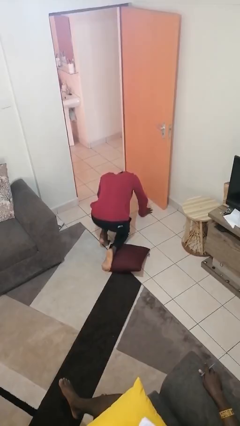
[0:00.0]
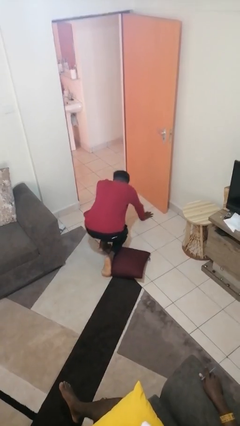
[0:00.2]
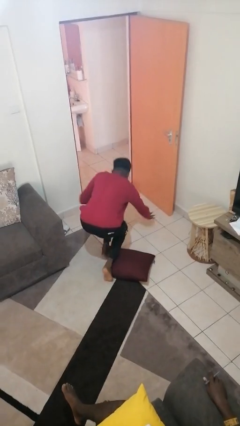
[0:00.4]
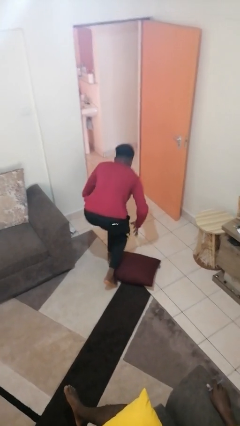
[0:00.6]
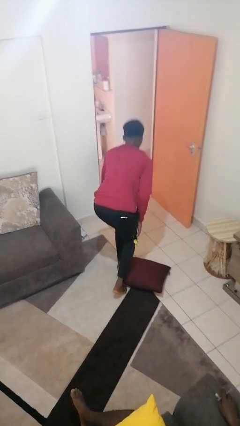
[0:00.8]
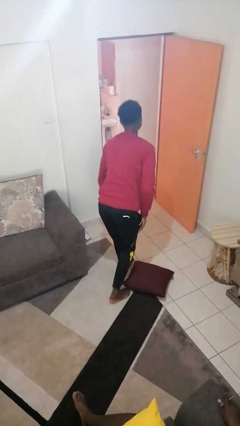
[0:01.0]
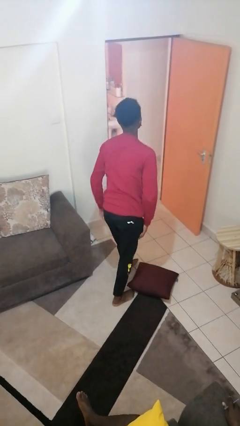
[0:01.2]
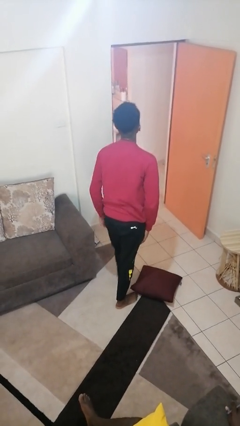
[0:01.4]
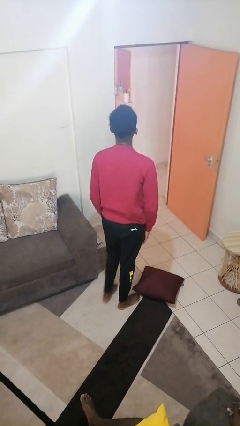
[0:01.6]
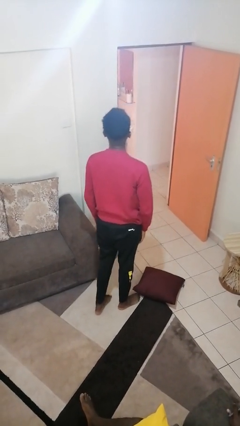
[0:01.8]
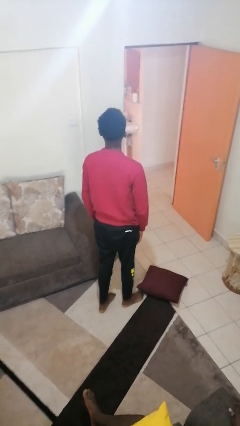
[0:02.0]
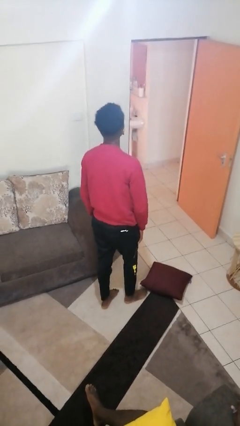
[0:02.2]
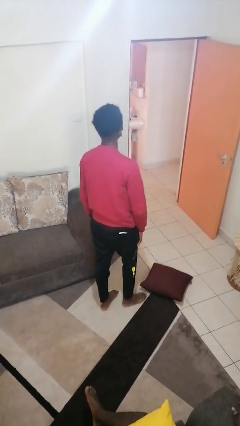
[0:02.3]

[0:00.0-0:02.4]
person stands up from floor

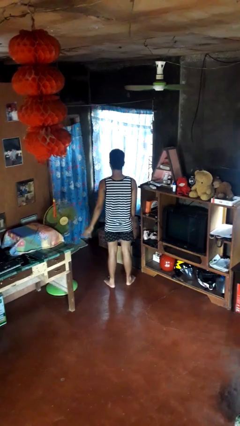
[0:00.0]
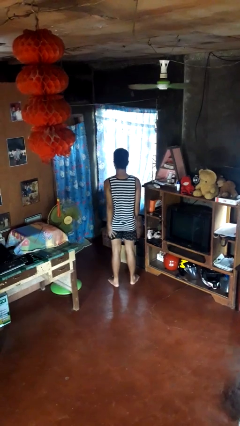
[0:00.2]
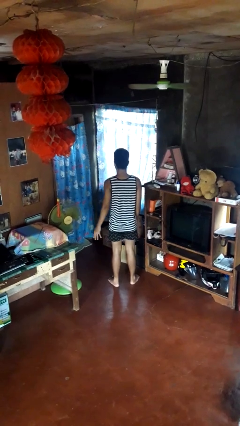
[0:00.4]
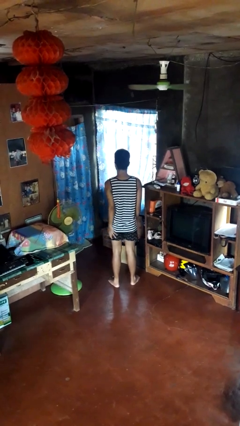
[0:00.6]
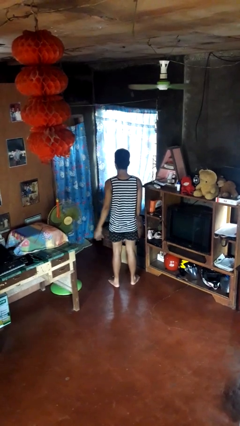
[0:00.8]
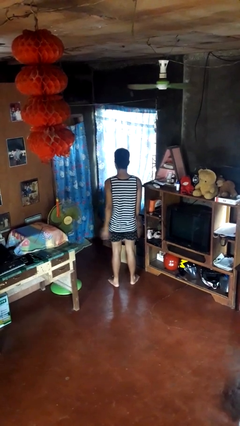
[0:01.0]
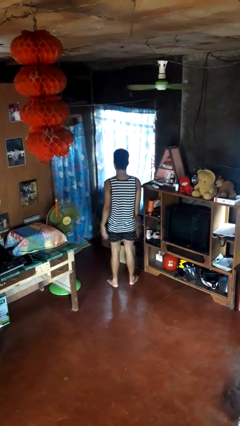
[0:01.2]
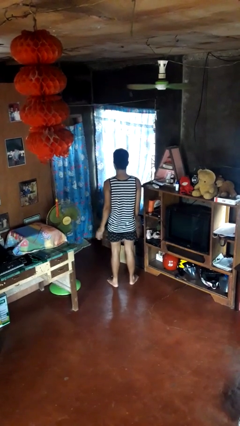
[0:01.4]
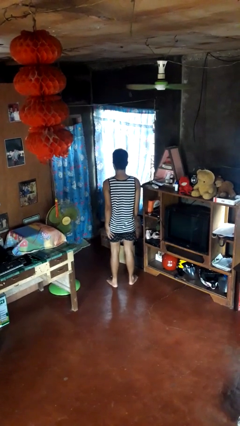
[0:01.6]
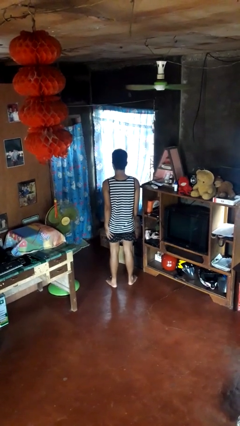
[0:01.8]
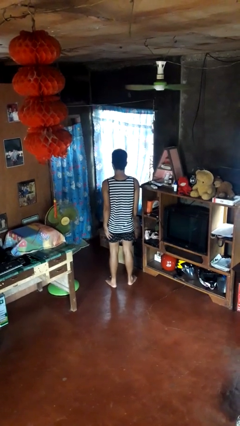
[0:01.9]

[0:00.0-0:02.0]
person slaps hands on thighs

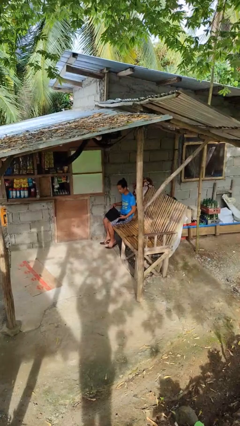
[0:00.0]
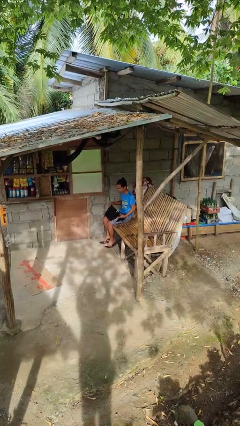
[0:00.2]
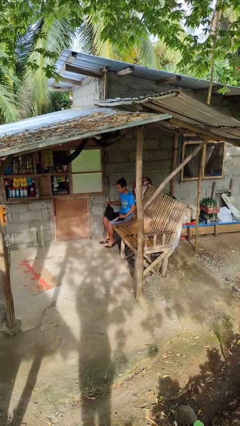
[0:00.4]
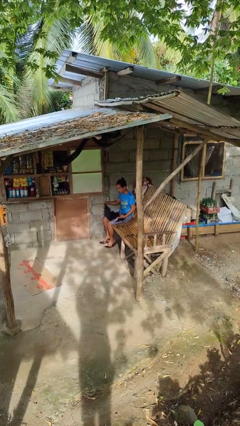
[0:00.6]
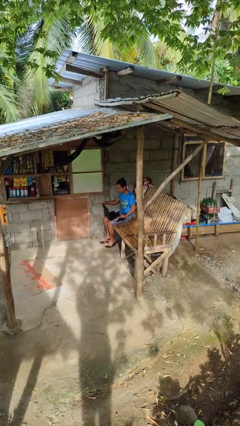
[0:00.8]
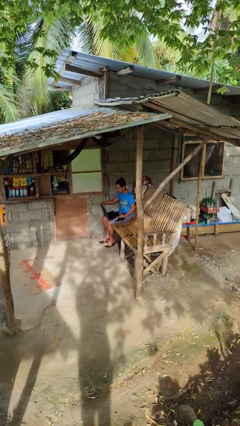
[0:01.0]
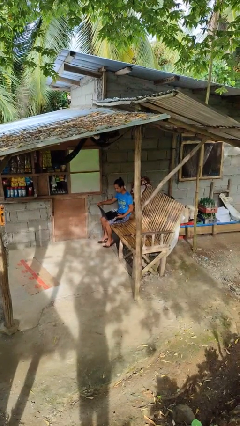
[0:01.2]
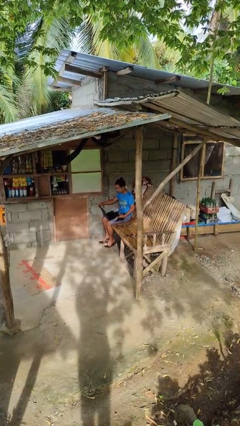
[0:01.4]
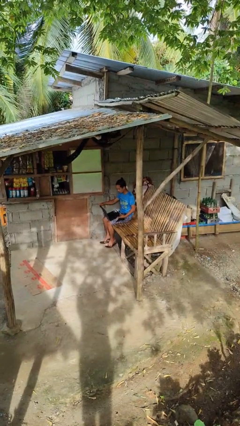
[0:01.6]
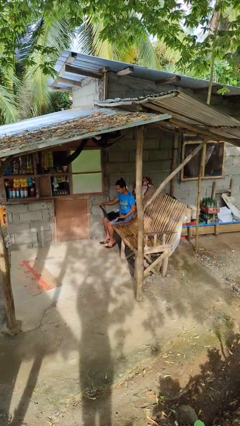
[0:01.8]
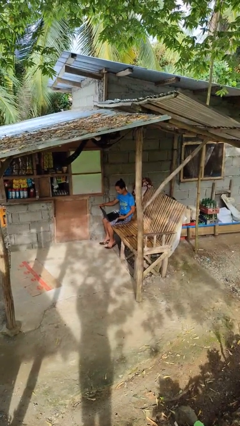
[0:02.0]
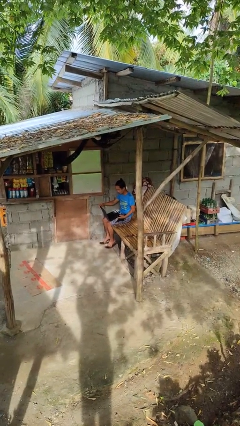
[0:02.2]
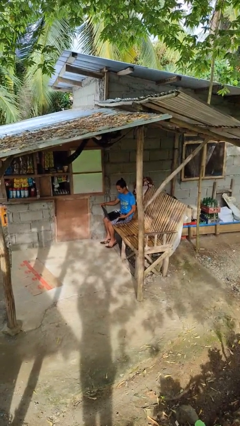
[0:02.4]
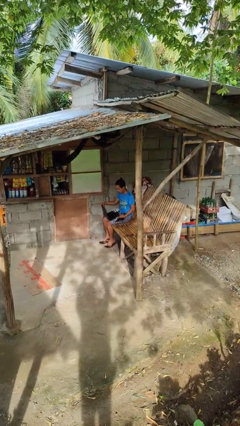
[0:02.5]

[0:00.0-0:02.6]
person opens laptop

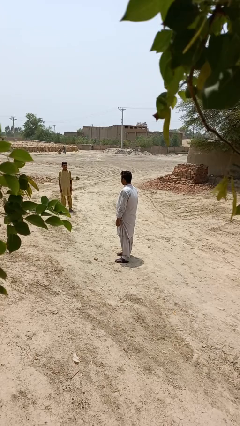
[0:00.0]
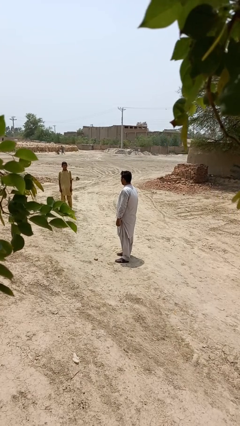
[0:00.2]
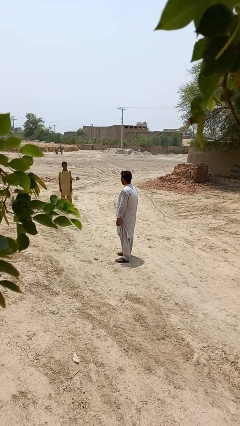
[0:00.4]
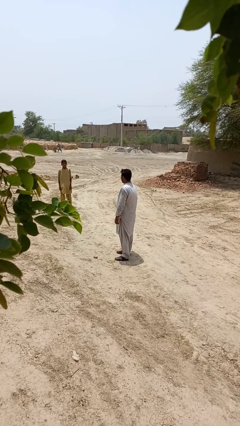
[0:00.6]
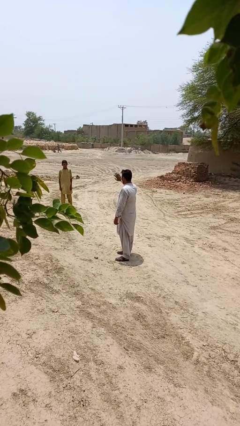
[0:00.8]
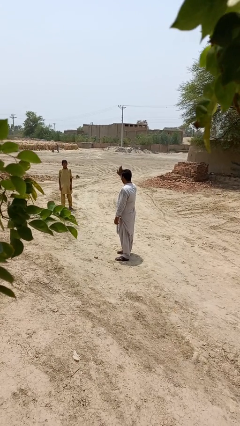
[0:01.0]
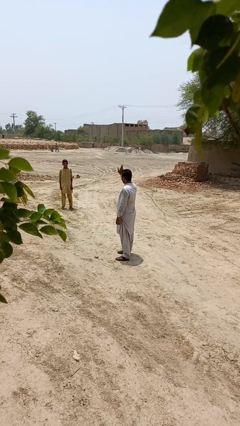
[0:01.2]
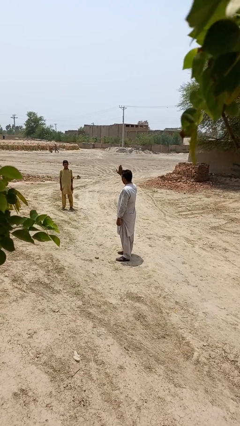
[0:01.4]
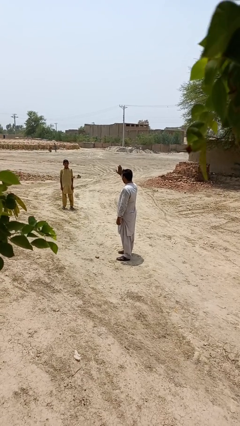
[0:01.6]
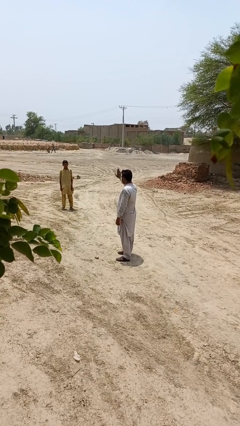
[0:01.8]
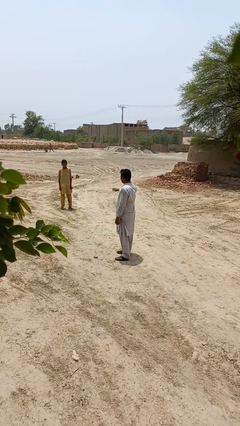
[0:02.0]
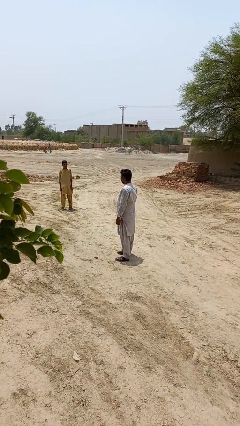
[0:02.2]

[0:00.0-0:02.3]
person waves at person

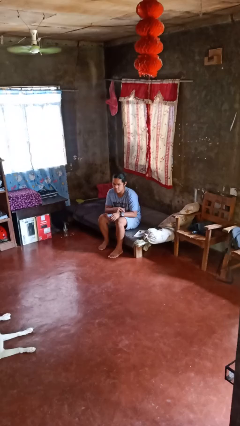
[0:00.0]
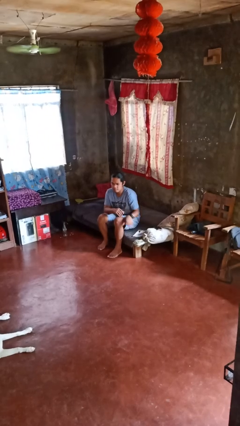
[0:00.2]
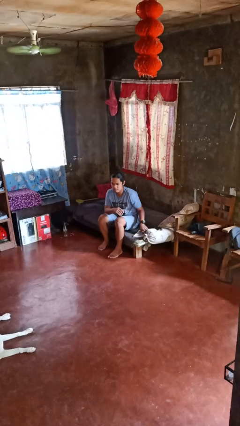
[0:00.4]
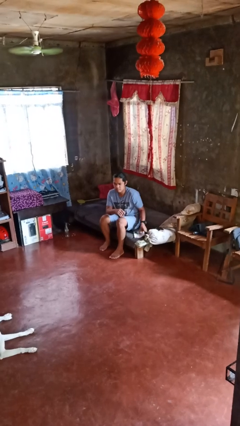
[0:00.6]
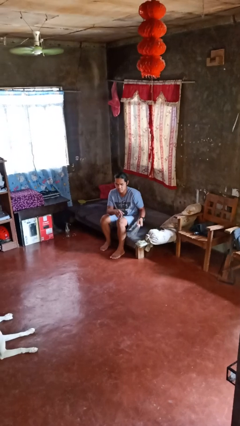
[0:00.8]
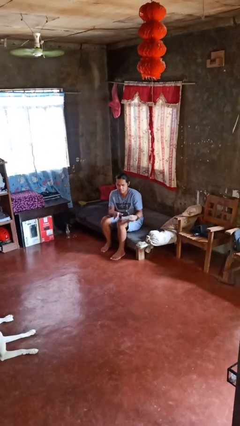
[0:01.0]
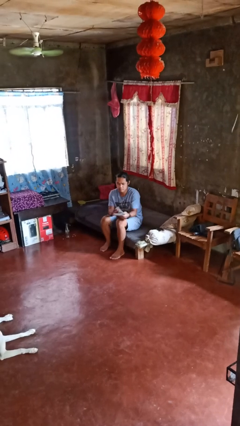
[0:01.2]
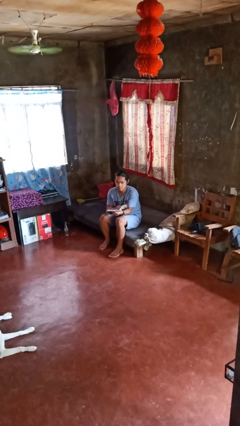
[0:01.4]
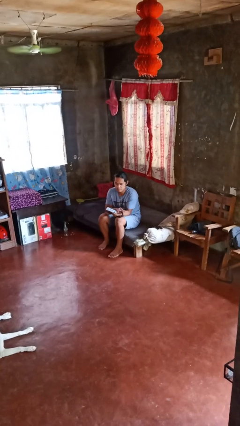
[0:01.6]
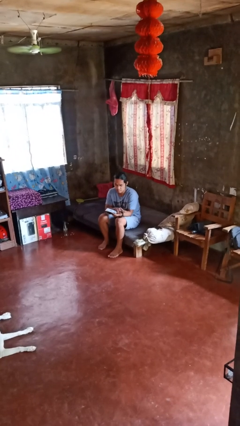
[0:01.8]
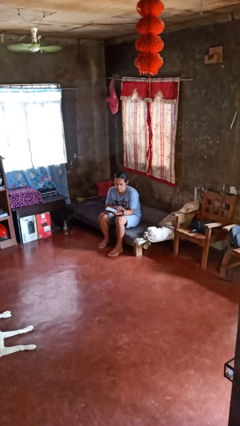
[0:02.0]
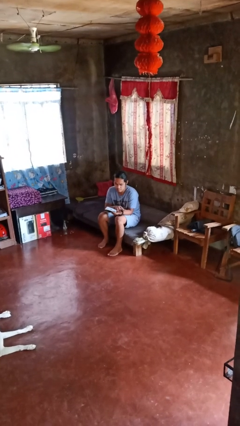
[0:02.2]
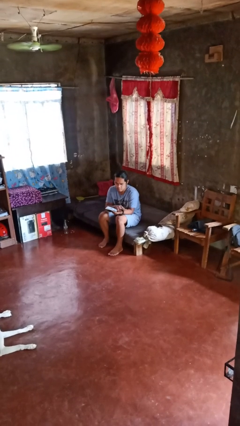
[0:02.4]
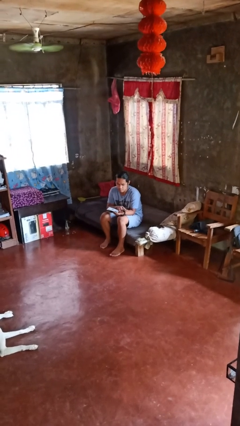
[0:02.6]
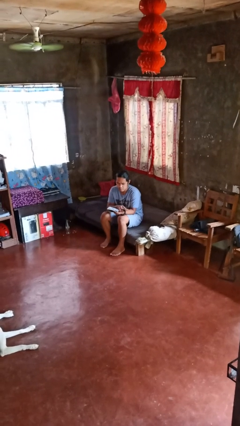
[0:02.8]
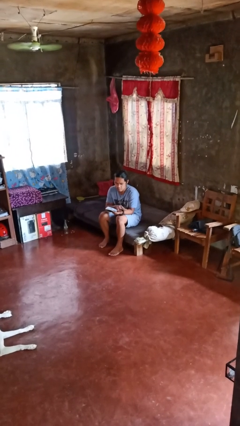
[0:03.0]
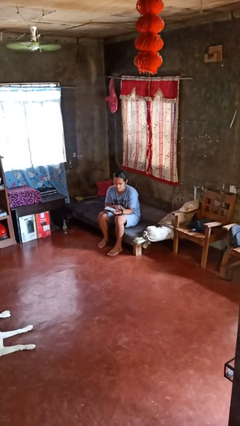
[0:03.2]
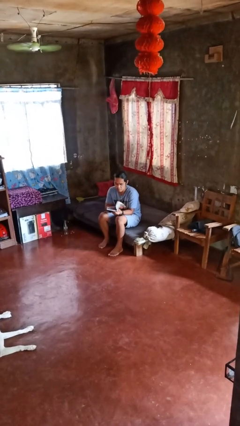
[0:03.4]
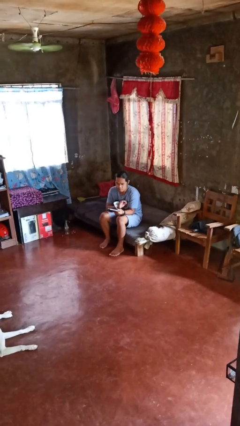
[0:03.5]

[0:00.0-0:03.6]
person reads magazine

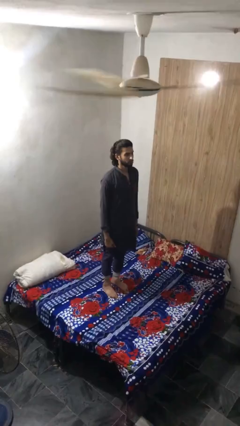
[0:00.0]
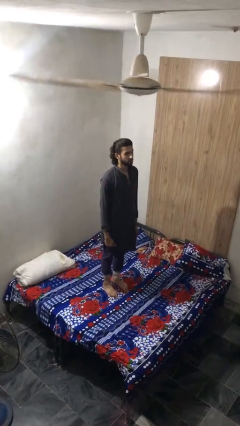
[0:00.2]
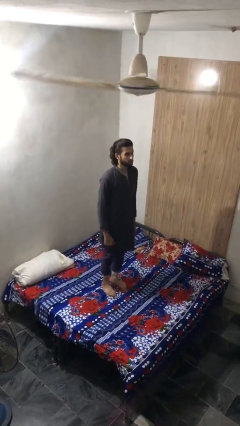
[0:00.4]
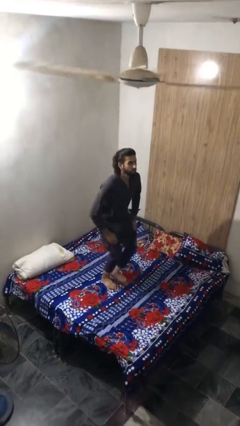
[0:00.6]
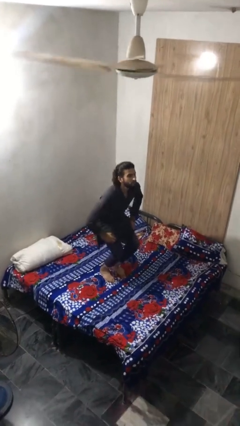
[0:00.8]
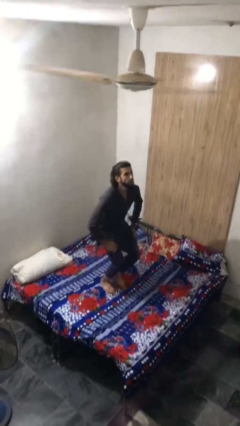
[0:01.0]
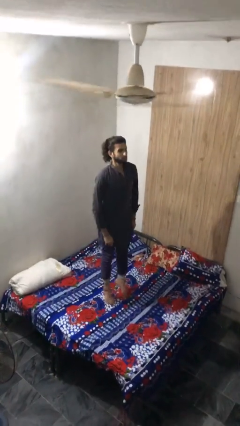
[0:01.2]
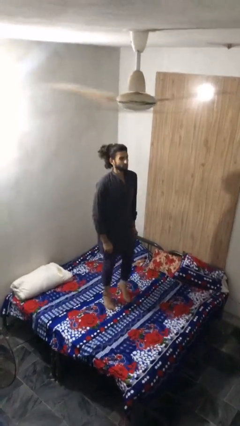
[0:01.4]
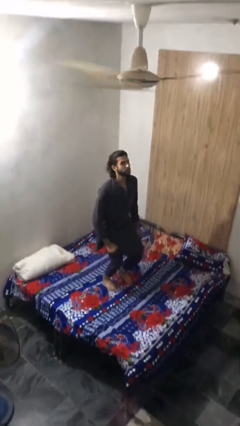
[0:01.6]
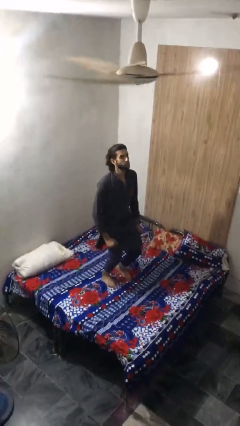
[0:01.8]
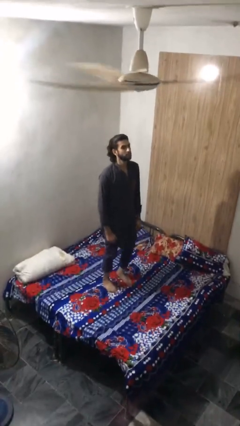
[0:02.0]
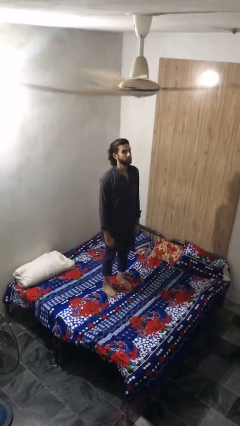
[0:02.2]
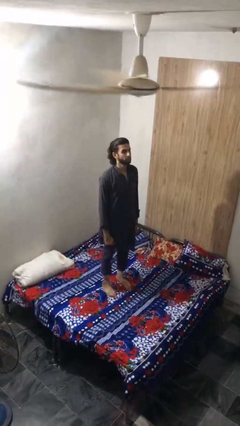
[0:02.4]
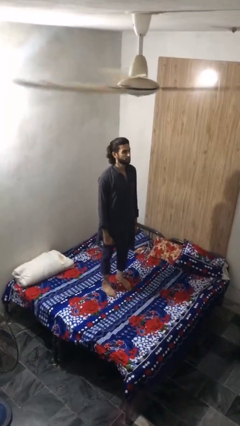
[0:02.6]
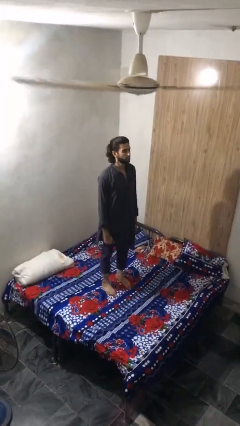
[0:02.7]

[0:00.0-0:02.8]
person jumps on bed

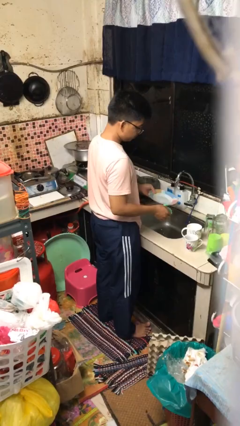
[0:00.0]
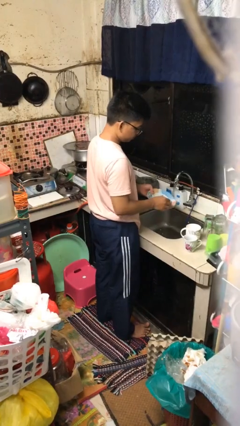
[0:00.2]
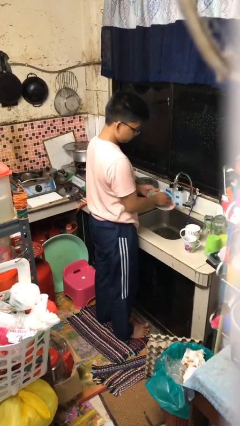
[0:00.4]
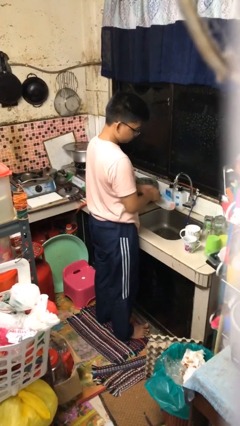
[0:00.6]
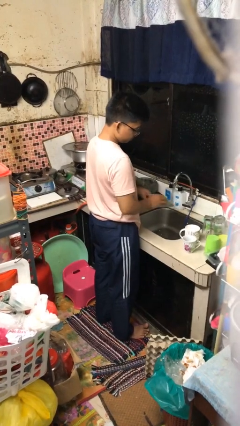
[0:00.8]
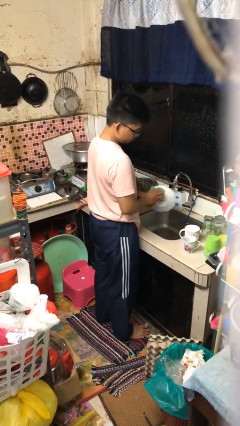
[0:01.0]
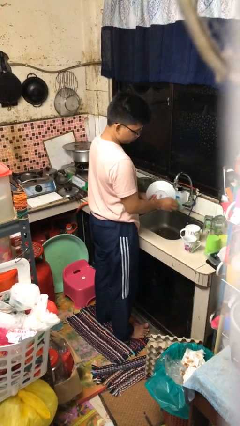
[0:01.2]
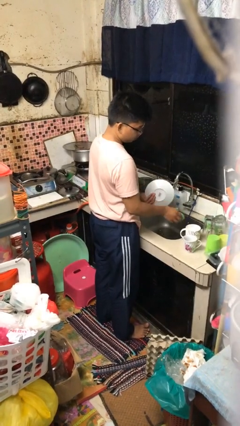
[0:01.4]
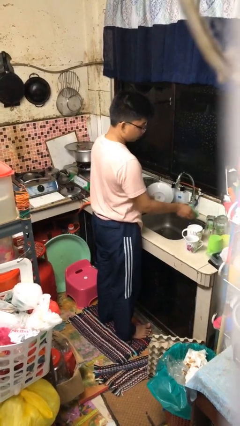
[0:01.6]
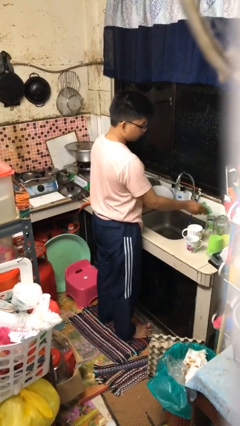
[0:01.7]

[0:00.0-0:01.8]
person washes dish
